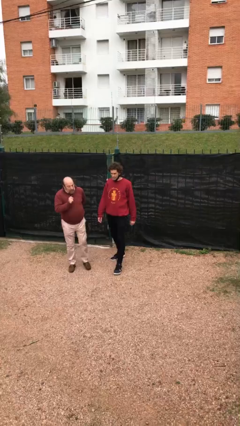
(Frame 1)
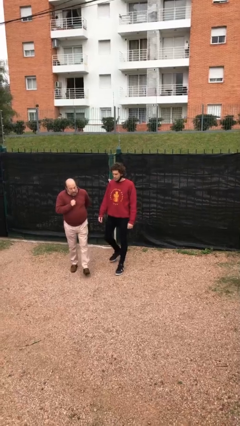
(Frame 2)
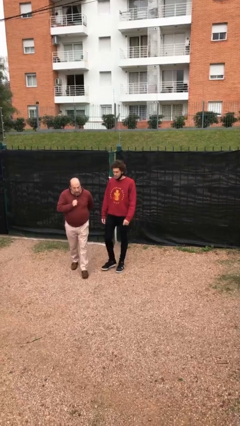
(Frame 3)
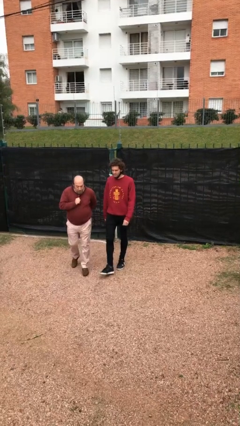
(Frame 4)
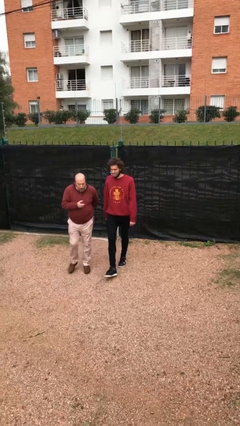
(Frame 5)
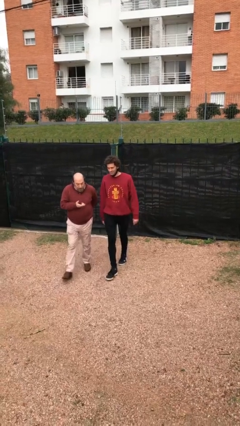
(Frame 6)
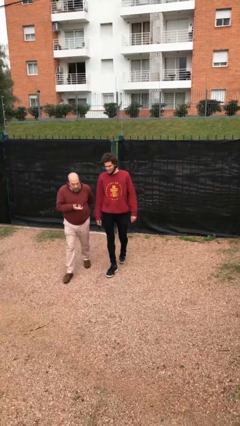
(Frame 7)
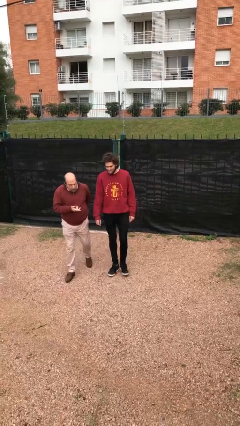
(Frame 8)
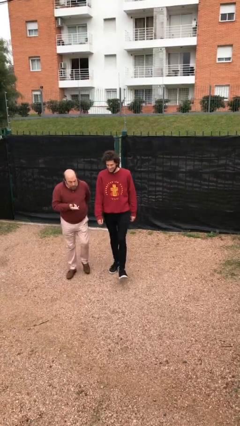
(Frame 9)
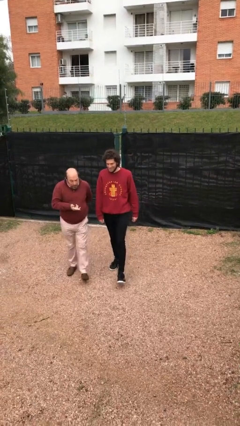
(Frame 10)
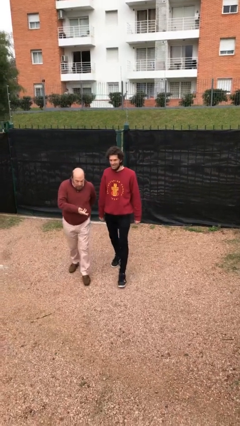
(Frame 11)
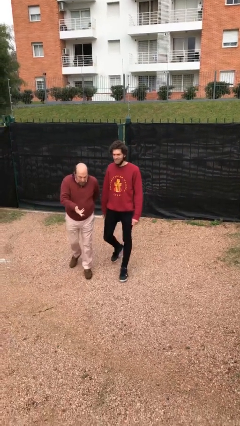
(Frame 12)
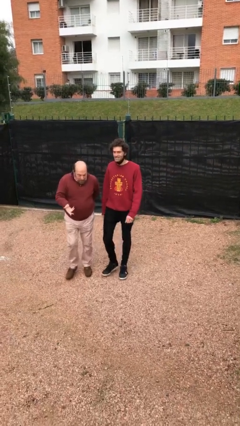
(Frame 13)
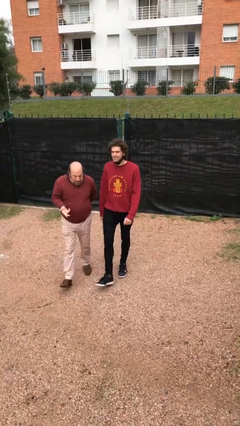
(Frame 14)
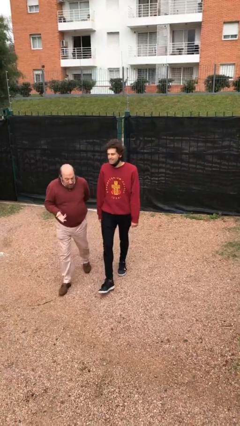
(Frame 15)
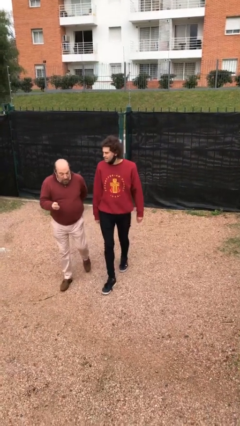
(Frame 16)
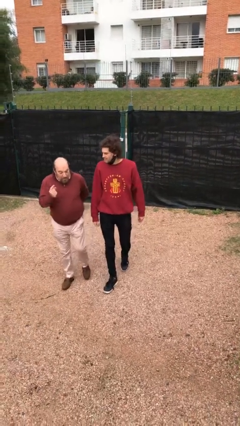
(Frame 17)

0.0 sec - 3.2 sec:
person talks to person

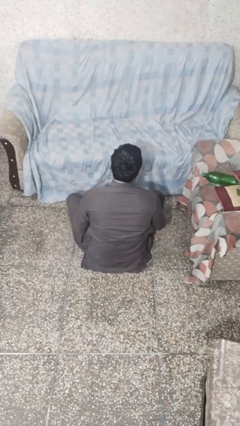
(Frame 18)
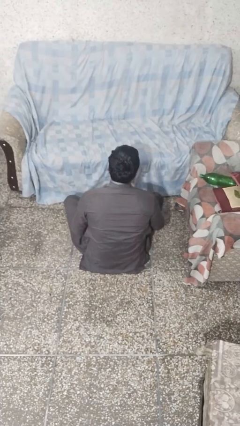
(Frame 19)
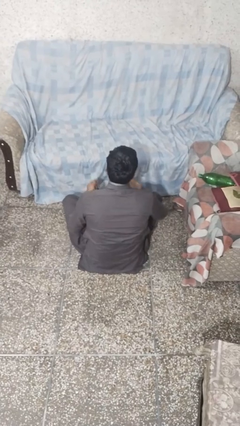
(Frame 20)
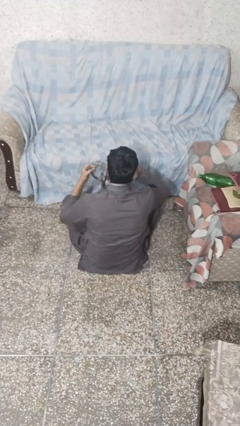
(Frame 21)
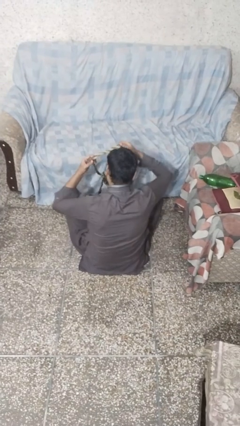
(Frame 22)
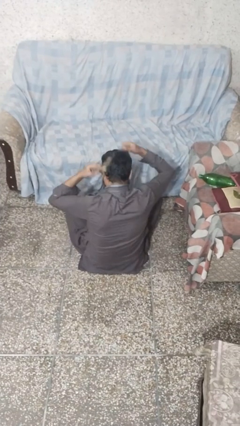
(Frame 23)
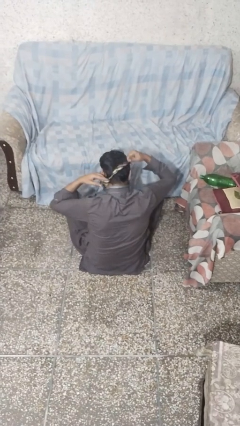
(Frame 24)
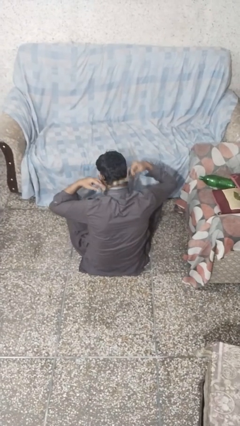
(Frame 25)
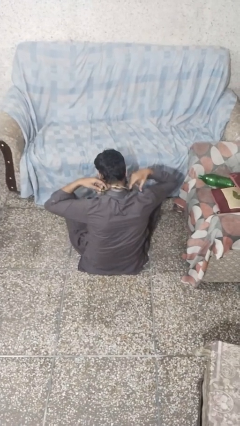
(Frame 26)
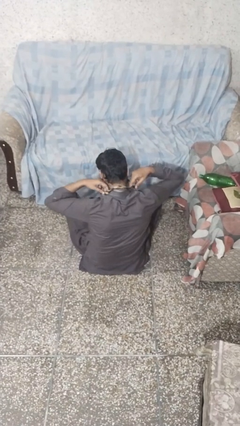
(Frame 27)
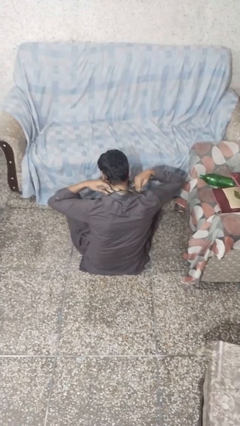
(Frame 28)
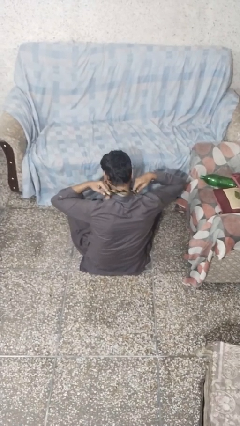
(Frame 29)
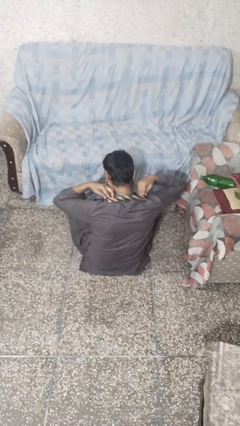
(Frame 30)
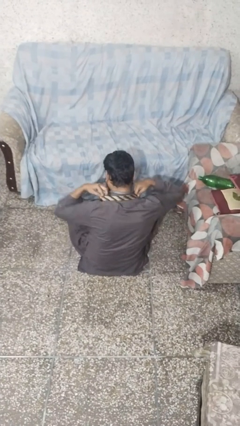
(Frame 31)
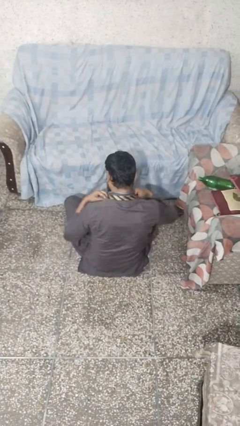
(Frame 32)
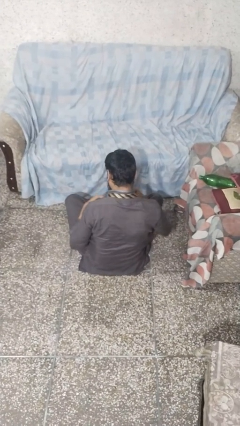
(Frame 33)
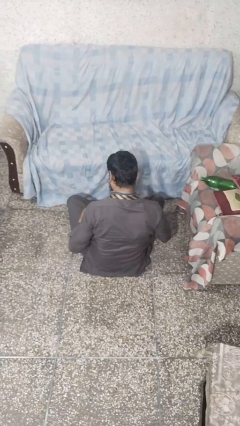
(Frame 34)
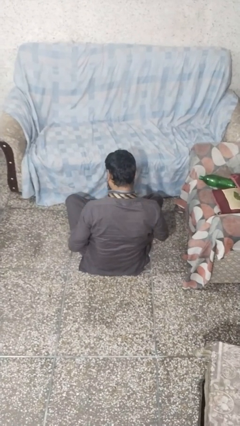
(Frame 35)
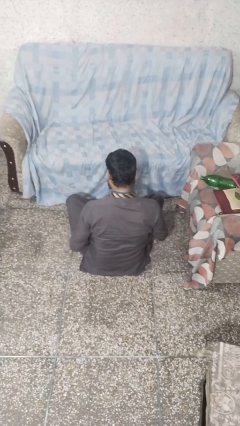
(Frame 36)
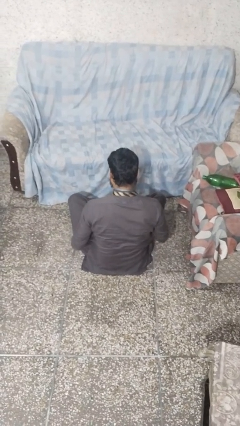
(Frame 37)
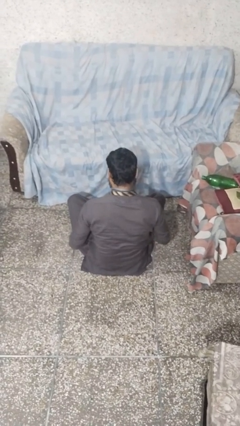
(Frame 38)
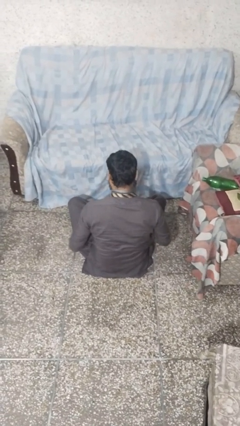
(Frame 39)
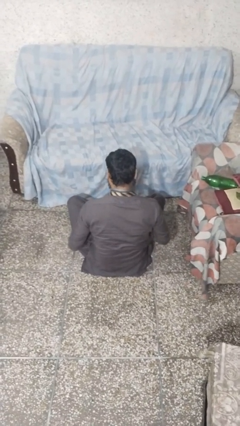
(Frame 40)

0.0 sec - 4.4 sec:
person puts on necktie

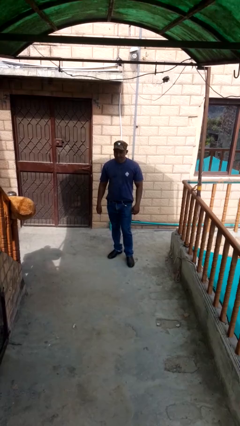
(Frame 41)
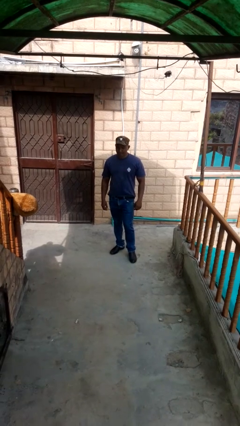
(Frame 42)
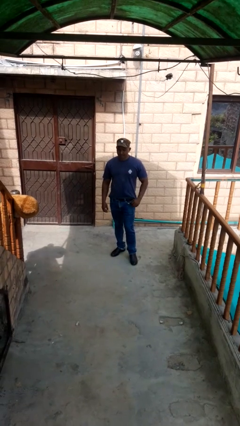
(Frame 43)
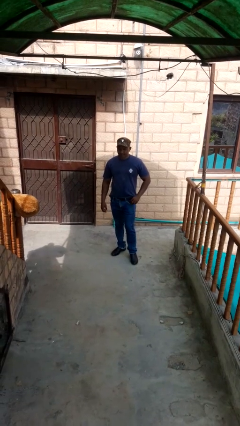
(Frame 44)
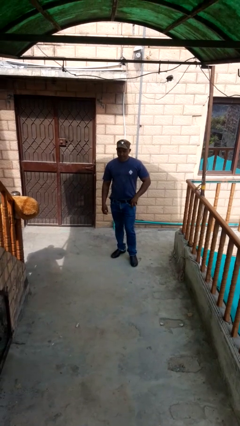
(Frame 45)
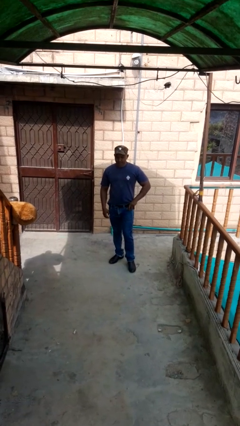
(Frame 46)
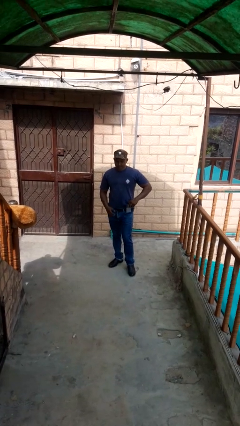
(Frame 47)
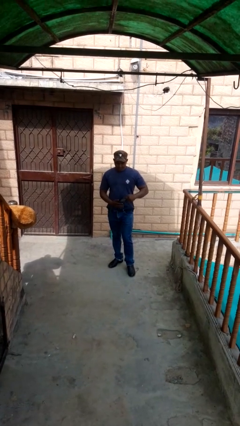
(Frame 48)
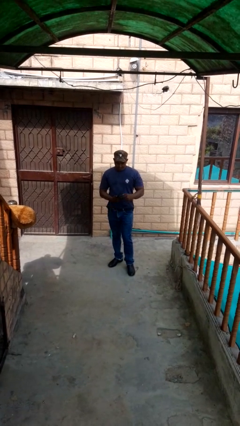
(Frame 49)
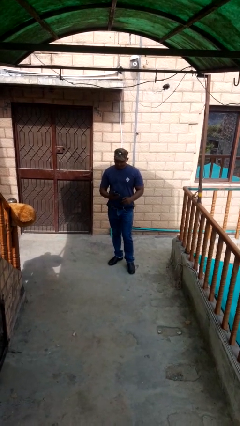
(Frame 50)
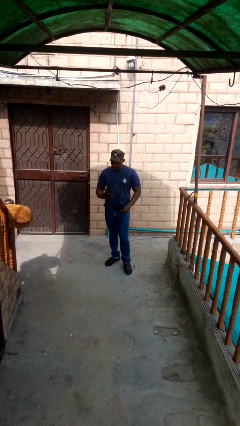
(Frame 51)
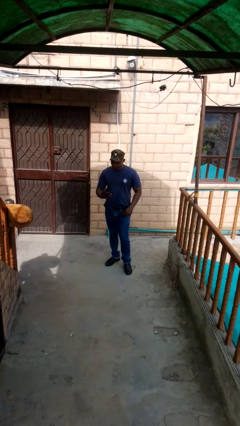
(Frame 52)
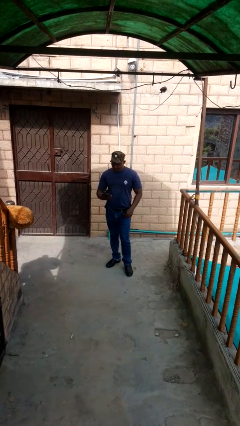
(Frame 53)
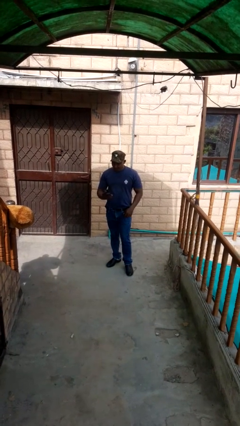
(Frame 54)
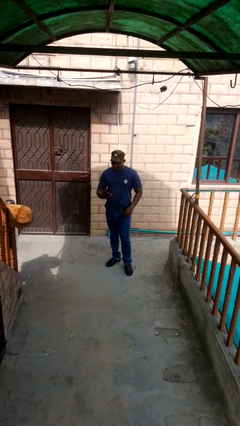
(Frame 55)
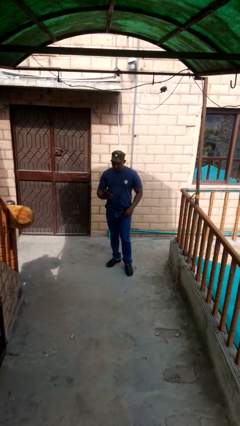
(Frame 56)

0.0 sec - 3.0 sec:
person takes phone from pocket

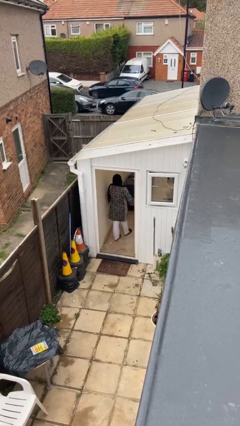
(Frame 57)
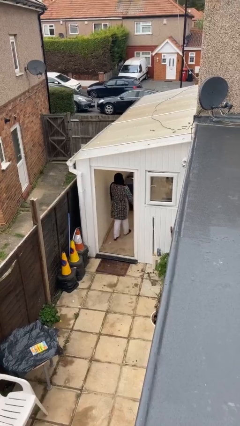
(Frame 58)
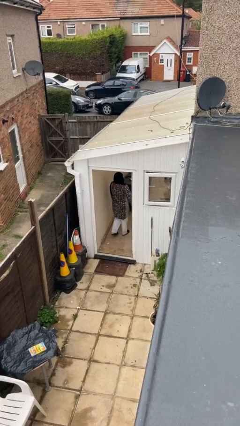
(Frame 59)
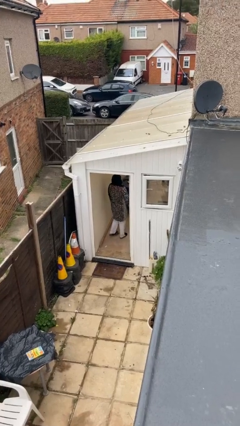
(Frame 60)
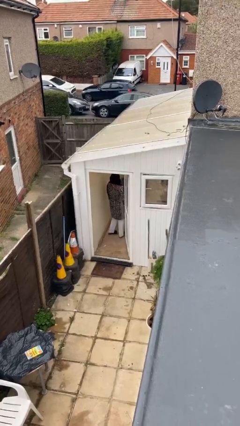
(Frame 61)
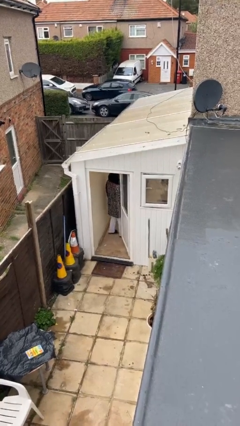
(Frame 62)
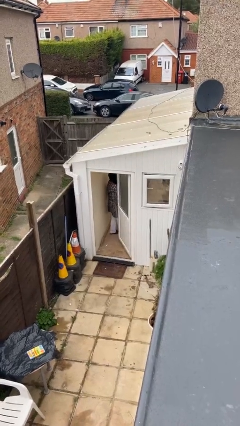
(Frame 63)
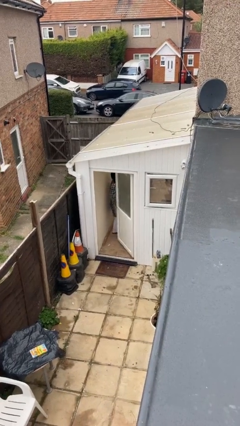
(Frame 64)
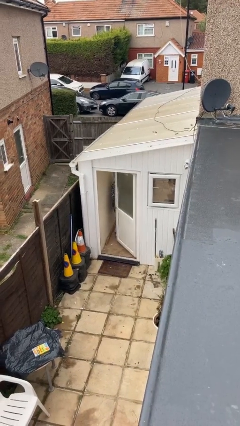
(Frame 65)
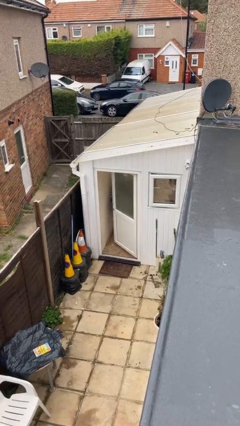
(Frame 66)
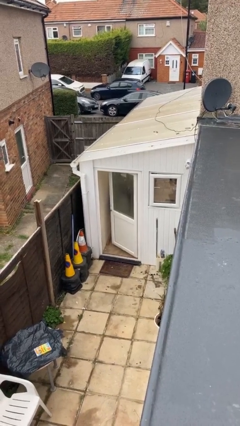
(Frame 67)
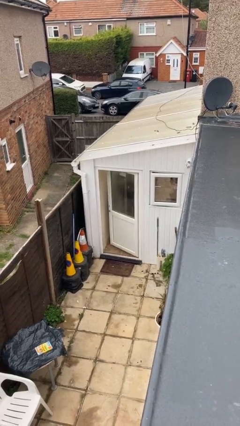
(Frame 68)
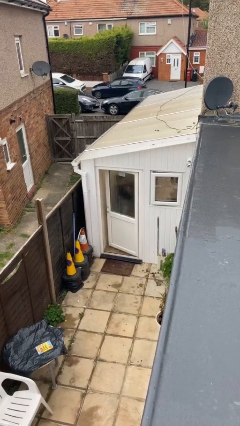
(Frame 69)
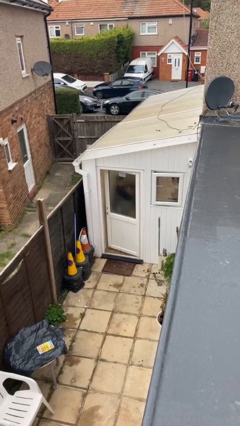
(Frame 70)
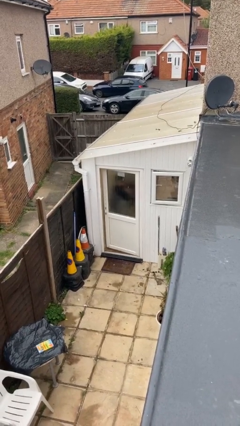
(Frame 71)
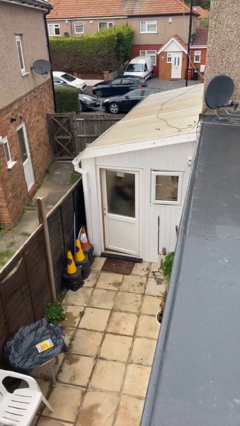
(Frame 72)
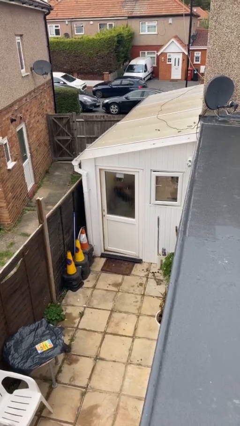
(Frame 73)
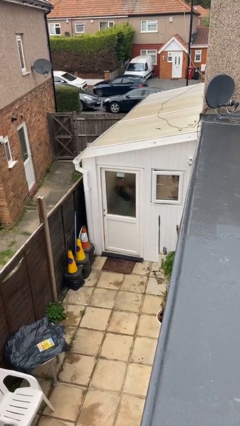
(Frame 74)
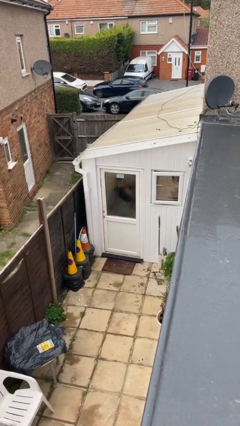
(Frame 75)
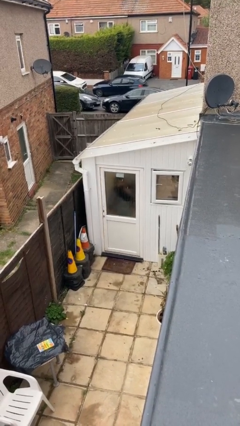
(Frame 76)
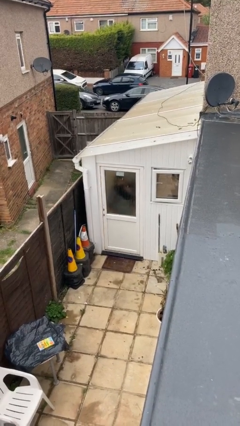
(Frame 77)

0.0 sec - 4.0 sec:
person closes facility door

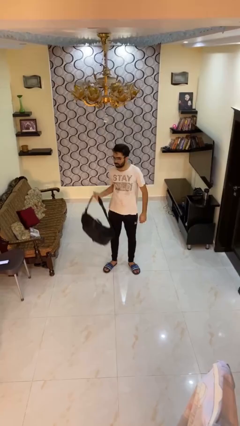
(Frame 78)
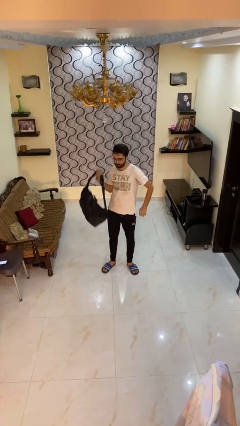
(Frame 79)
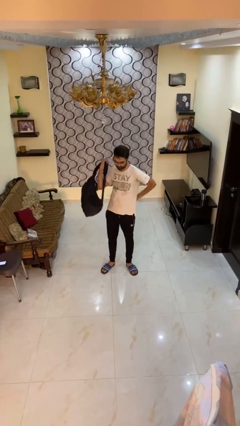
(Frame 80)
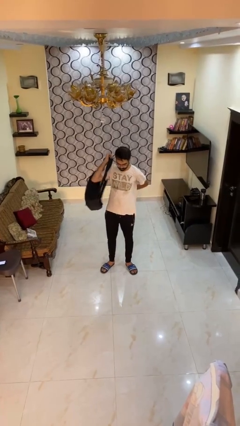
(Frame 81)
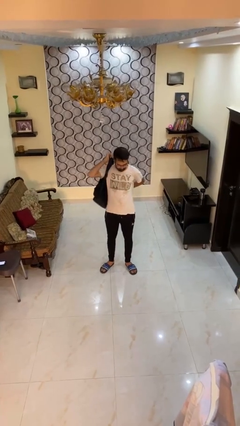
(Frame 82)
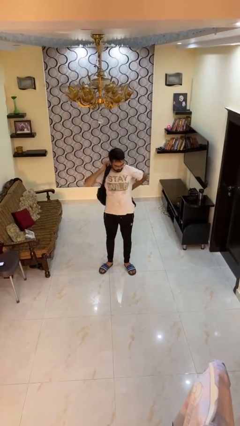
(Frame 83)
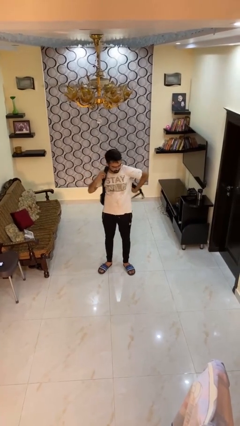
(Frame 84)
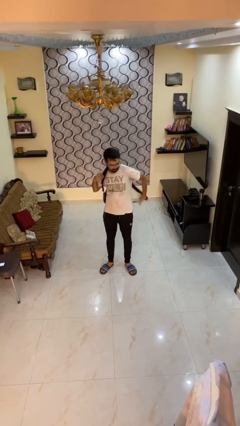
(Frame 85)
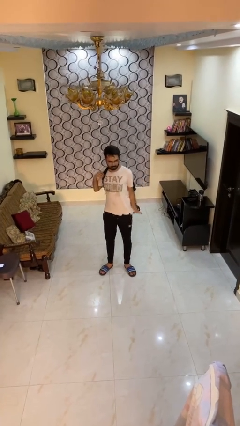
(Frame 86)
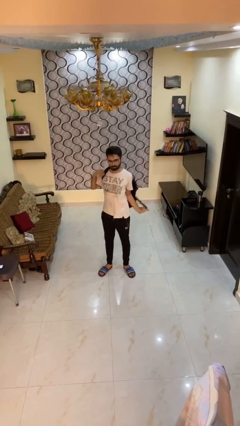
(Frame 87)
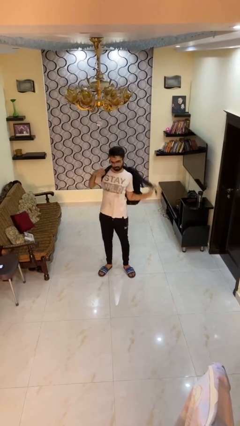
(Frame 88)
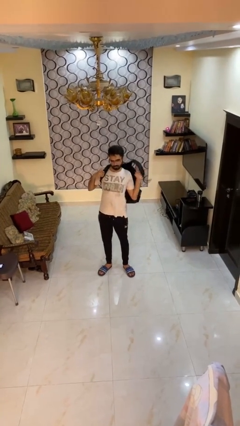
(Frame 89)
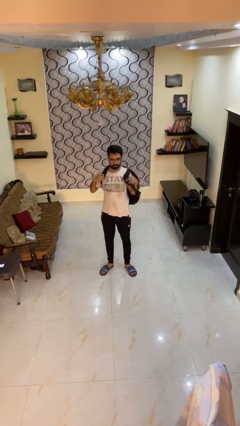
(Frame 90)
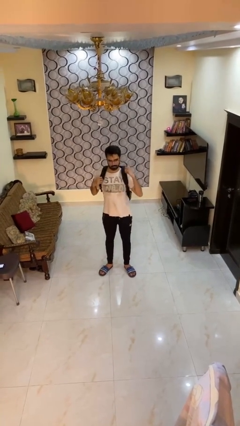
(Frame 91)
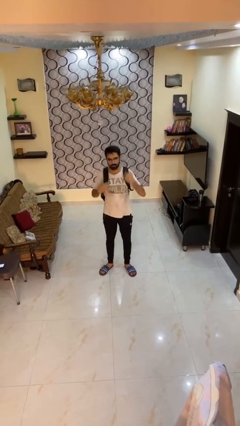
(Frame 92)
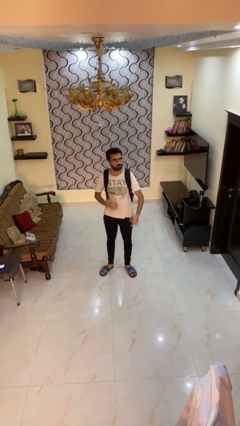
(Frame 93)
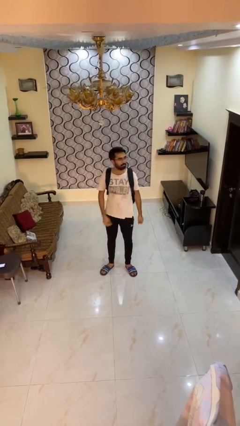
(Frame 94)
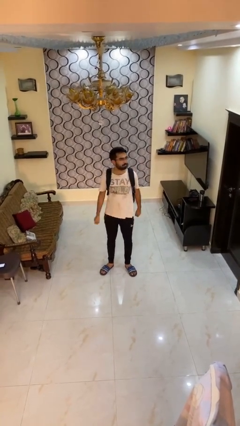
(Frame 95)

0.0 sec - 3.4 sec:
person puts on backpack
